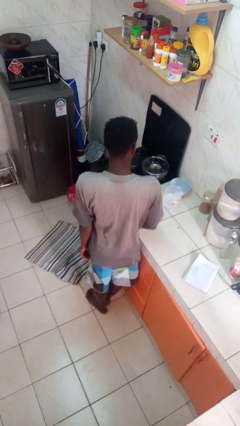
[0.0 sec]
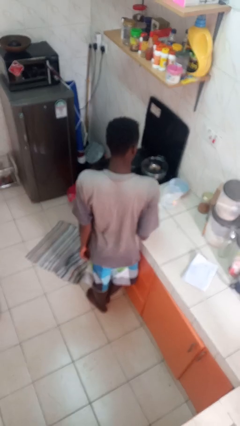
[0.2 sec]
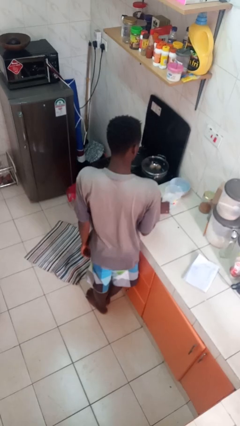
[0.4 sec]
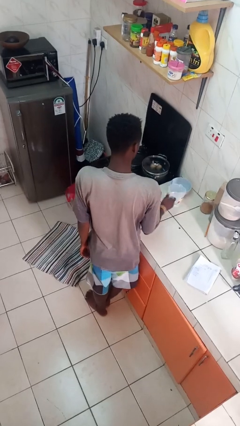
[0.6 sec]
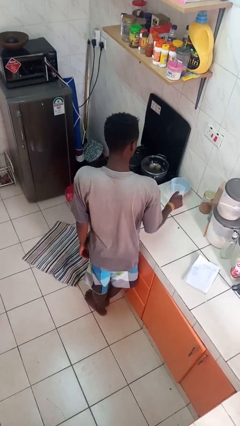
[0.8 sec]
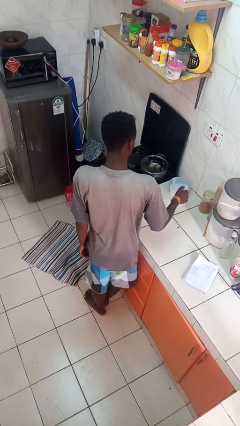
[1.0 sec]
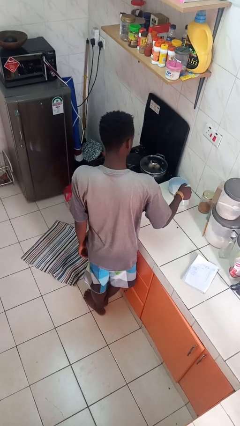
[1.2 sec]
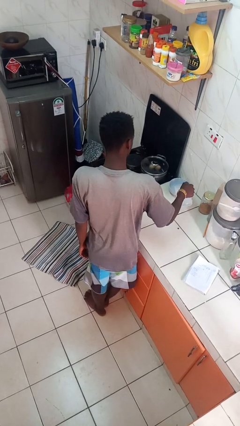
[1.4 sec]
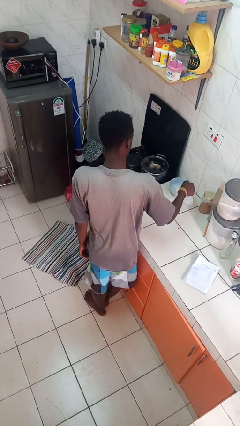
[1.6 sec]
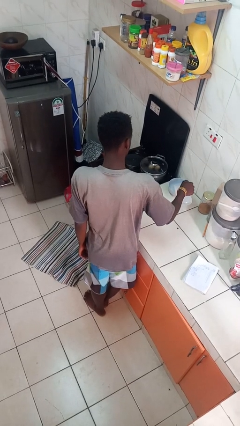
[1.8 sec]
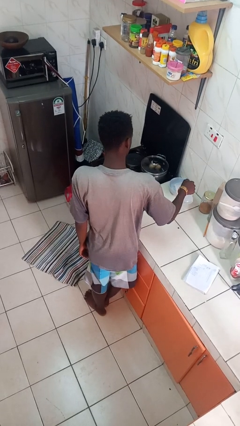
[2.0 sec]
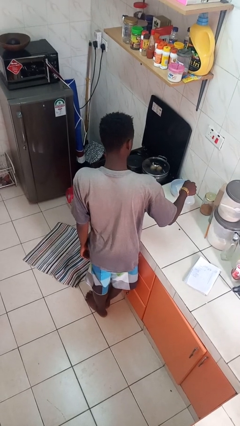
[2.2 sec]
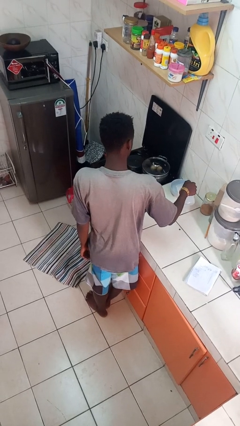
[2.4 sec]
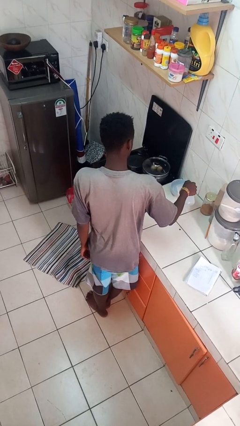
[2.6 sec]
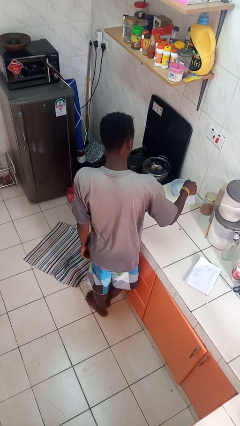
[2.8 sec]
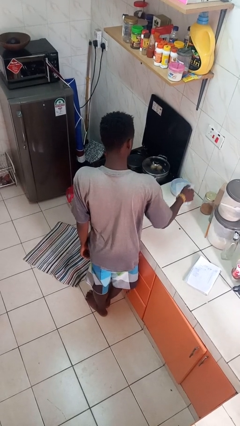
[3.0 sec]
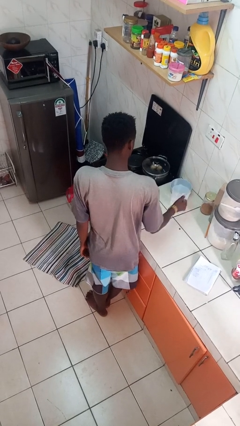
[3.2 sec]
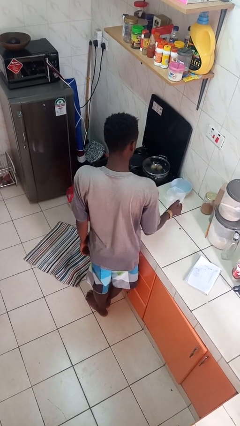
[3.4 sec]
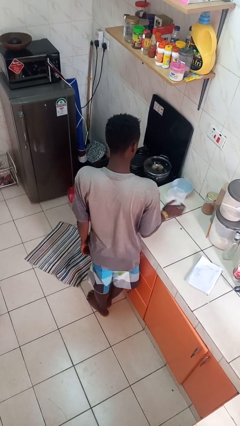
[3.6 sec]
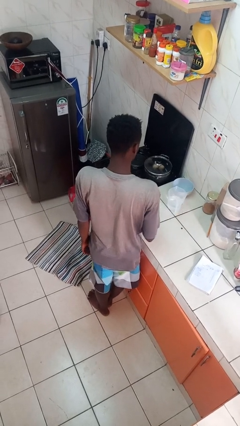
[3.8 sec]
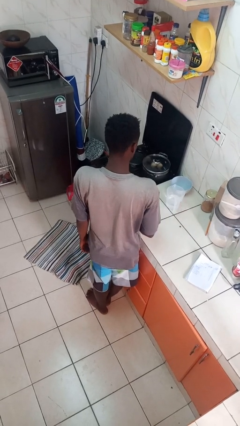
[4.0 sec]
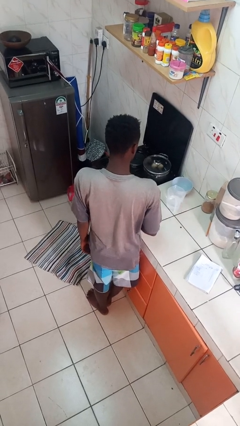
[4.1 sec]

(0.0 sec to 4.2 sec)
person pours into bowl

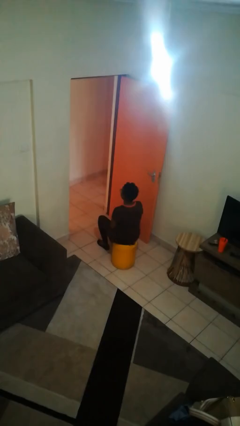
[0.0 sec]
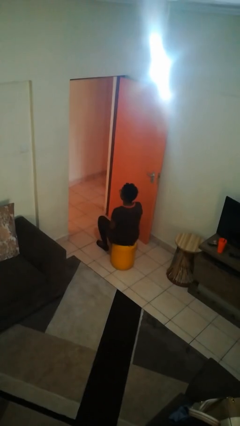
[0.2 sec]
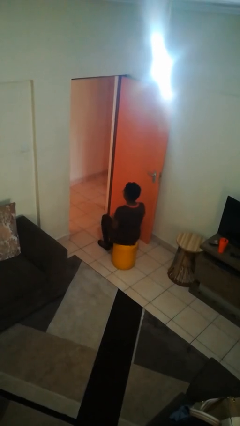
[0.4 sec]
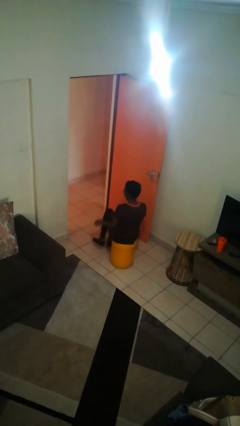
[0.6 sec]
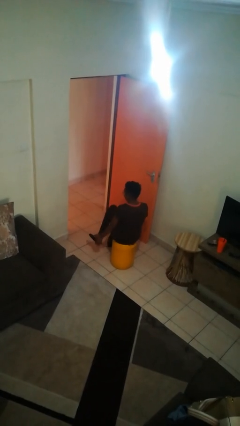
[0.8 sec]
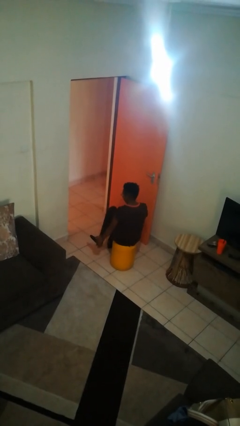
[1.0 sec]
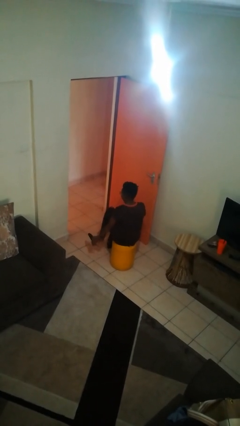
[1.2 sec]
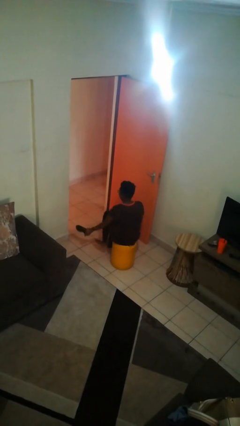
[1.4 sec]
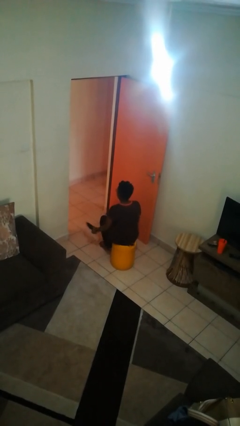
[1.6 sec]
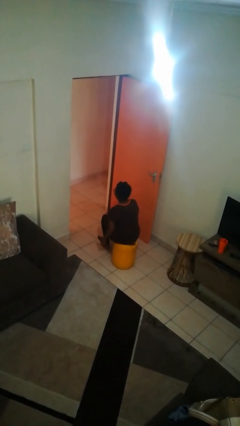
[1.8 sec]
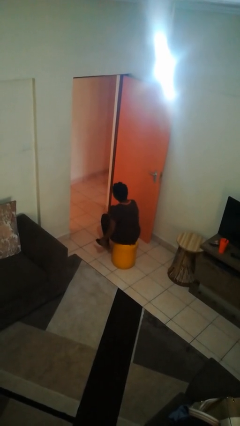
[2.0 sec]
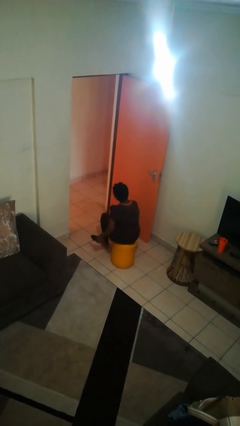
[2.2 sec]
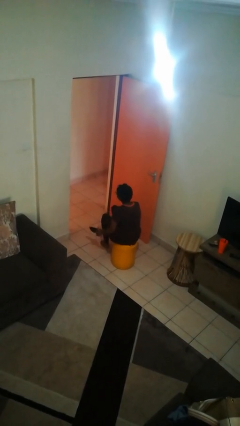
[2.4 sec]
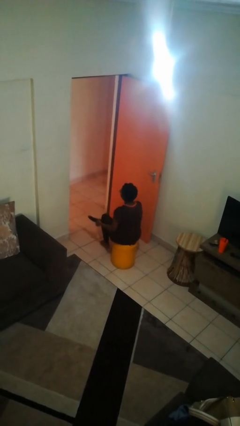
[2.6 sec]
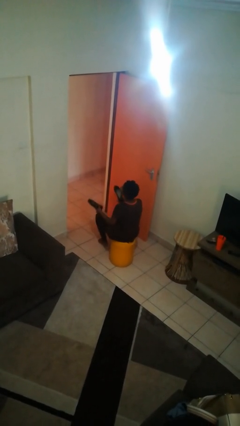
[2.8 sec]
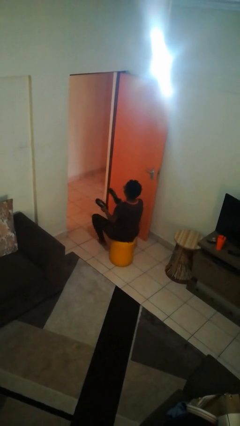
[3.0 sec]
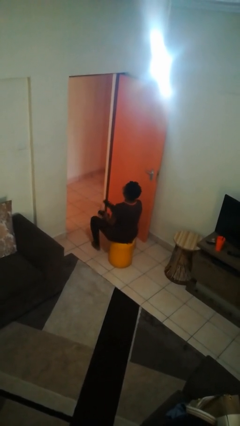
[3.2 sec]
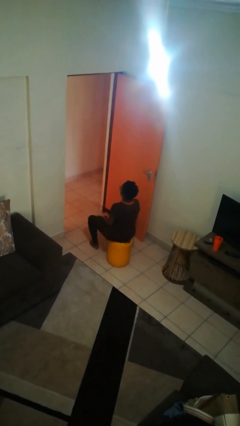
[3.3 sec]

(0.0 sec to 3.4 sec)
person takes off shoes

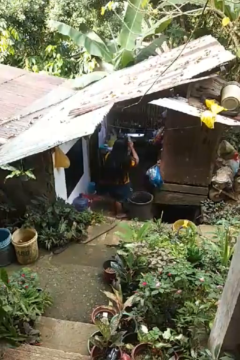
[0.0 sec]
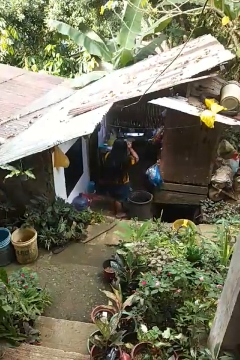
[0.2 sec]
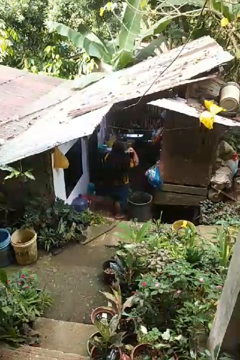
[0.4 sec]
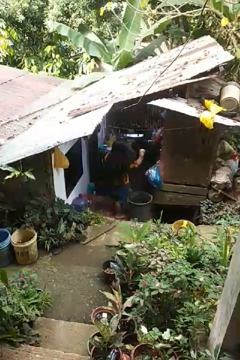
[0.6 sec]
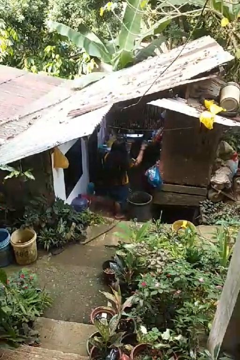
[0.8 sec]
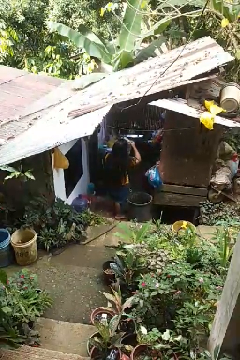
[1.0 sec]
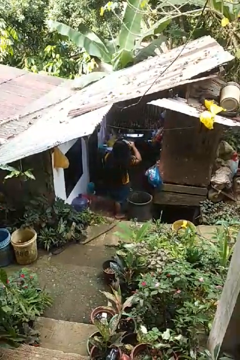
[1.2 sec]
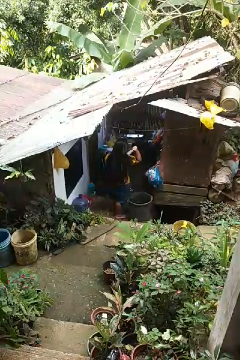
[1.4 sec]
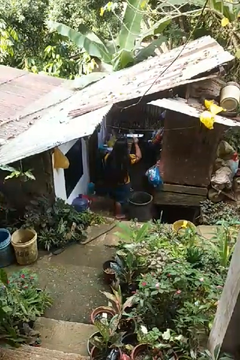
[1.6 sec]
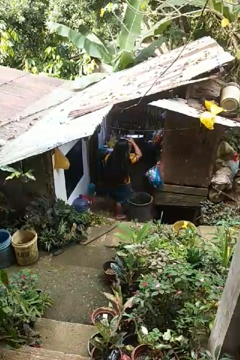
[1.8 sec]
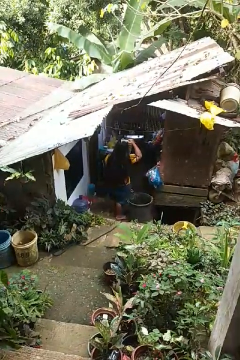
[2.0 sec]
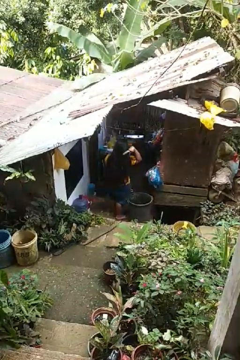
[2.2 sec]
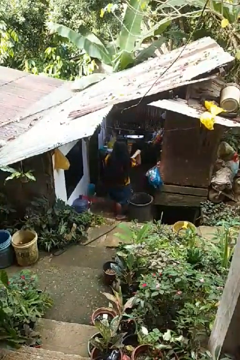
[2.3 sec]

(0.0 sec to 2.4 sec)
person brushes hair

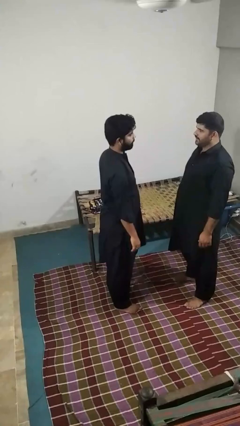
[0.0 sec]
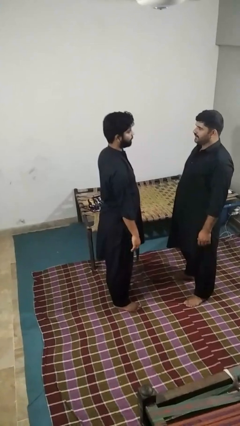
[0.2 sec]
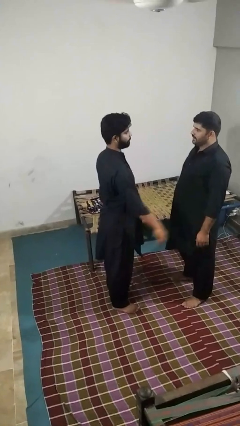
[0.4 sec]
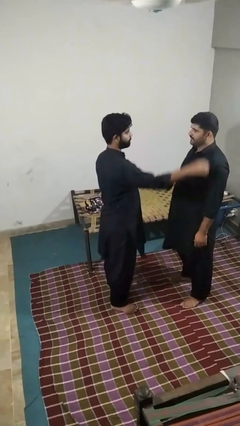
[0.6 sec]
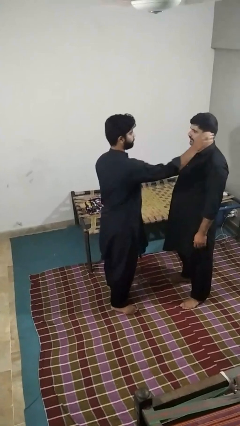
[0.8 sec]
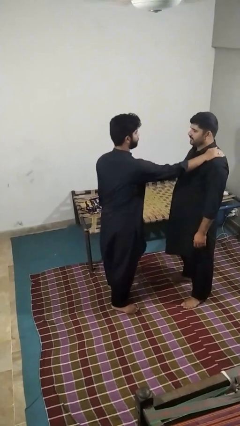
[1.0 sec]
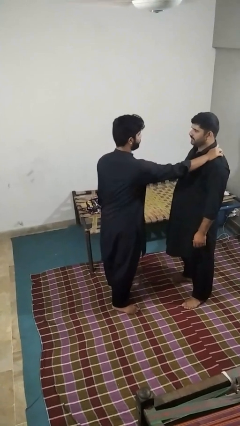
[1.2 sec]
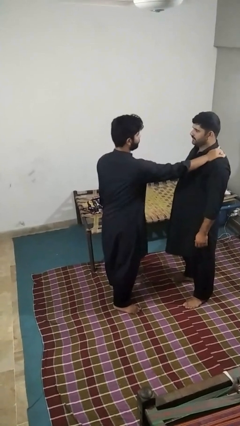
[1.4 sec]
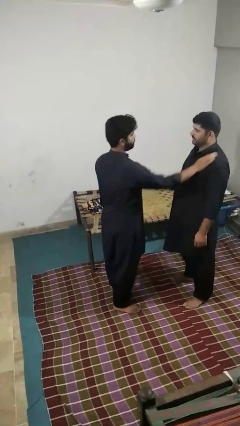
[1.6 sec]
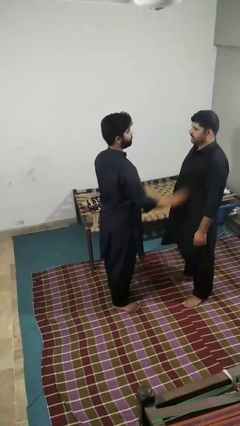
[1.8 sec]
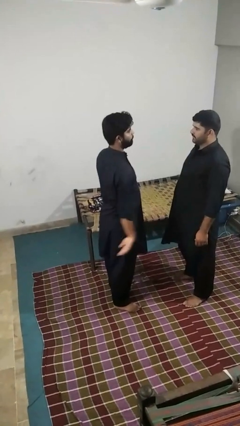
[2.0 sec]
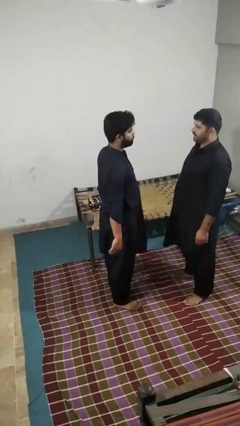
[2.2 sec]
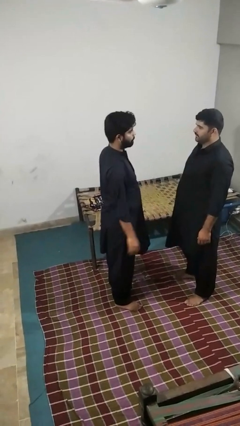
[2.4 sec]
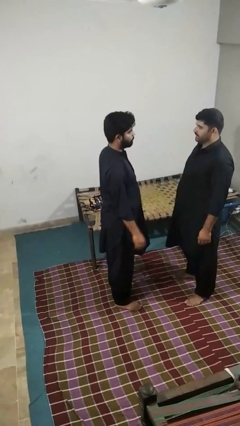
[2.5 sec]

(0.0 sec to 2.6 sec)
person pounds shoulders of person

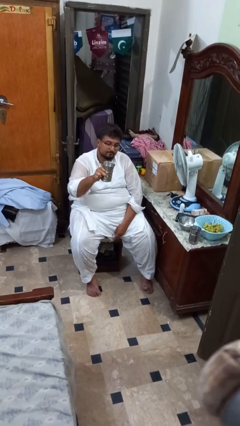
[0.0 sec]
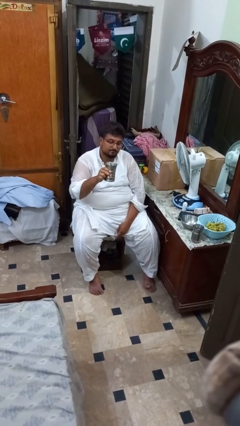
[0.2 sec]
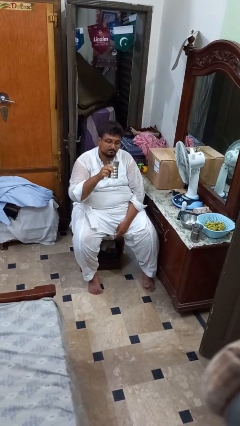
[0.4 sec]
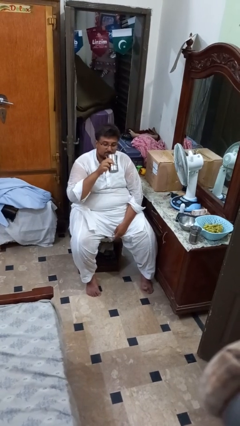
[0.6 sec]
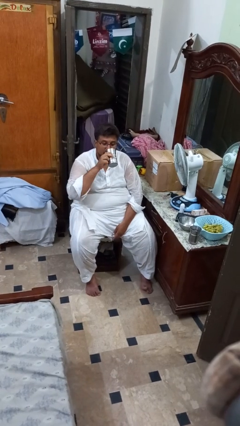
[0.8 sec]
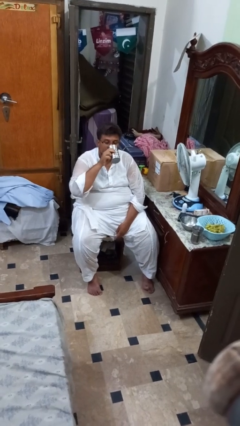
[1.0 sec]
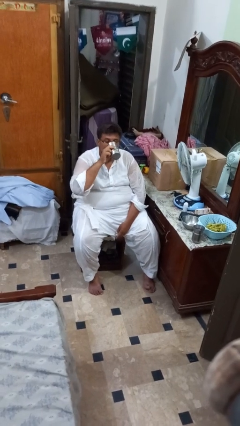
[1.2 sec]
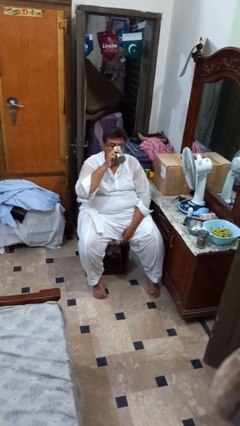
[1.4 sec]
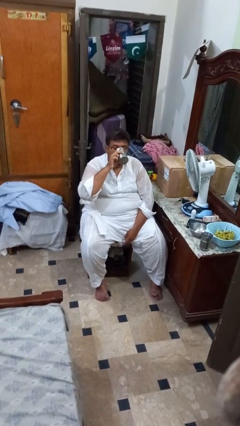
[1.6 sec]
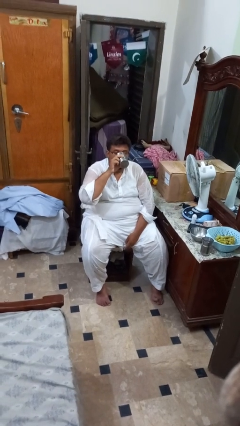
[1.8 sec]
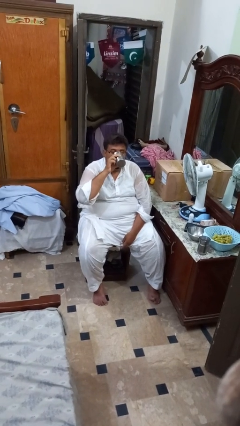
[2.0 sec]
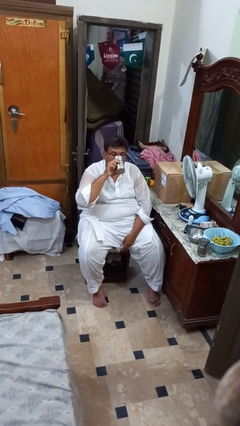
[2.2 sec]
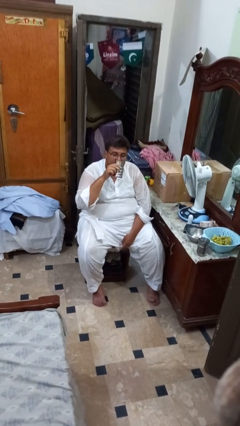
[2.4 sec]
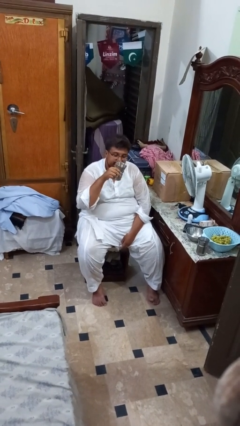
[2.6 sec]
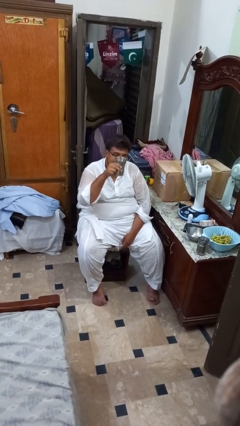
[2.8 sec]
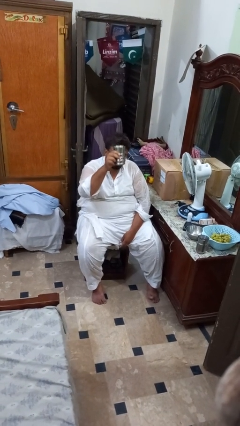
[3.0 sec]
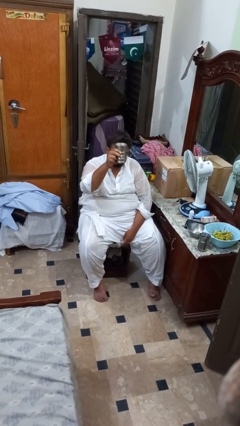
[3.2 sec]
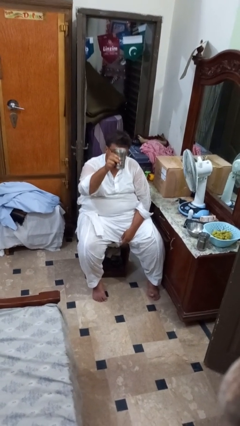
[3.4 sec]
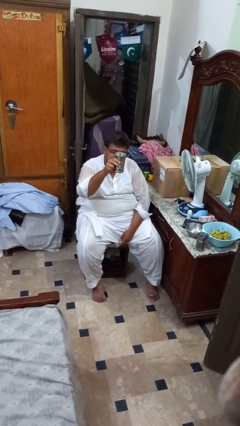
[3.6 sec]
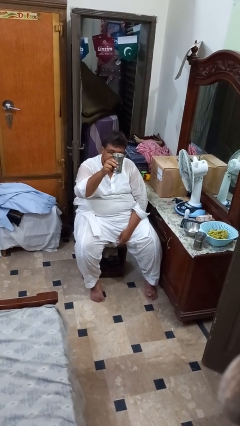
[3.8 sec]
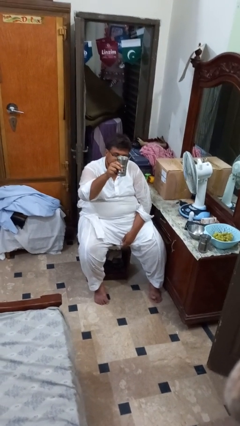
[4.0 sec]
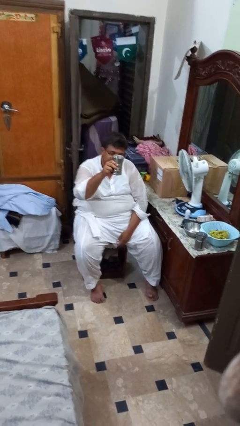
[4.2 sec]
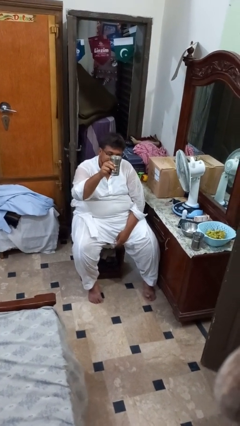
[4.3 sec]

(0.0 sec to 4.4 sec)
person drinks from shotglass

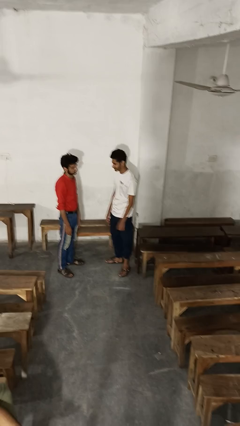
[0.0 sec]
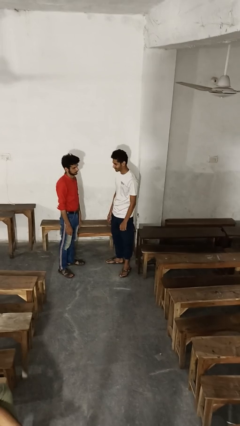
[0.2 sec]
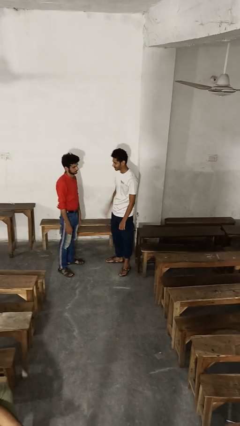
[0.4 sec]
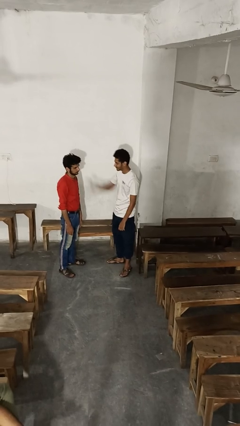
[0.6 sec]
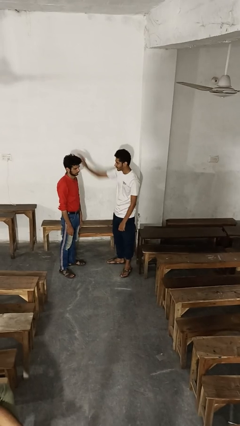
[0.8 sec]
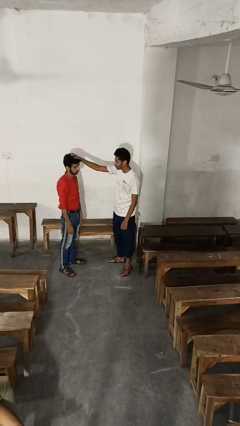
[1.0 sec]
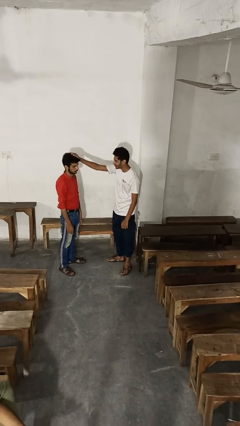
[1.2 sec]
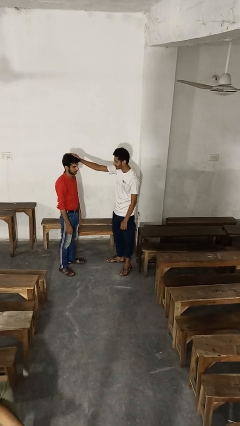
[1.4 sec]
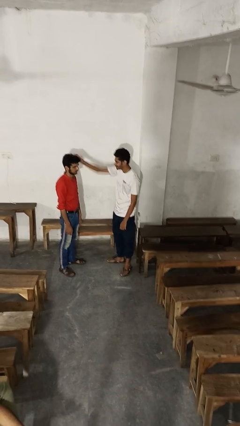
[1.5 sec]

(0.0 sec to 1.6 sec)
person grabs person by hair
